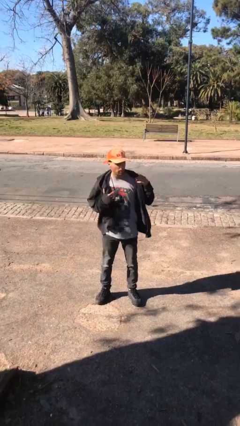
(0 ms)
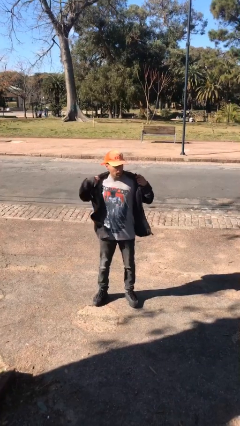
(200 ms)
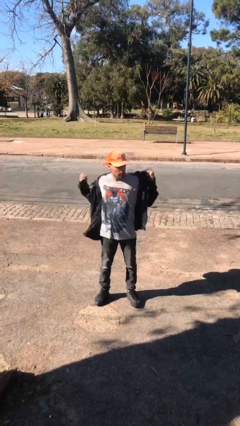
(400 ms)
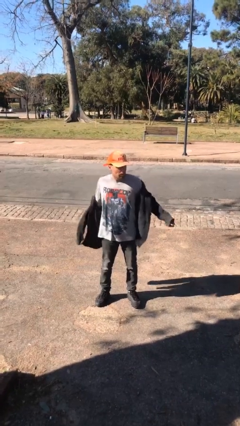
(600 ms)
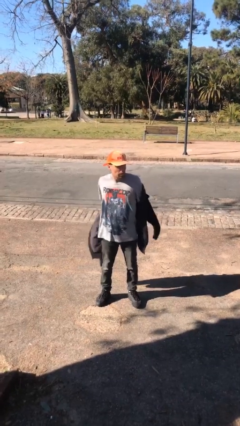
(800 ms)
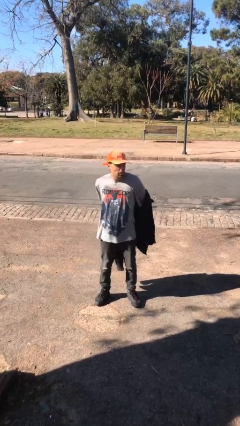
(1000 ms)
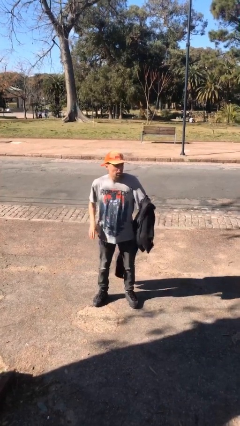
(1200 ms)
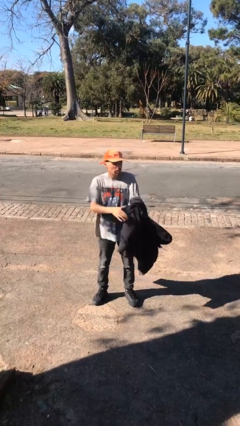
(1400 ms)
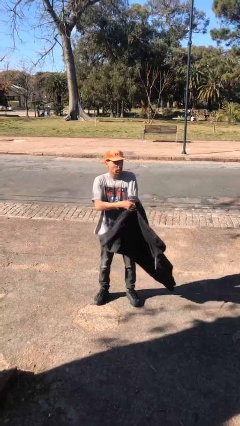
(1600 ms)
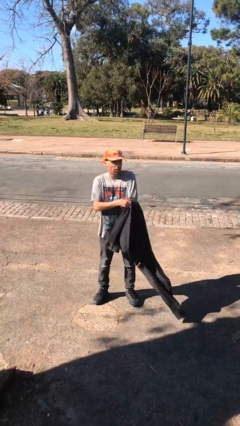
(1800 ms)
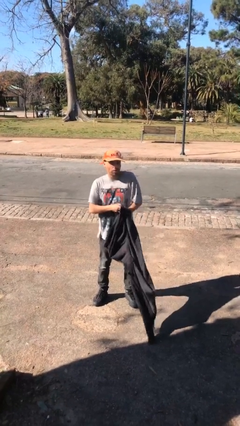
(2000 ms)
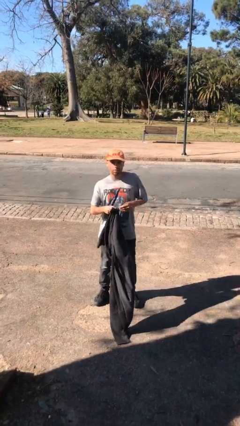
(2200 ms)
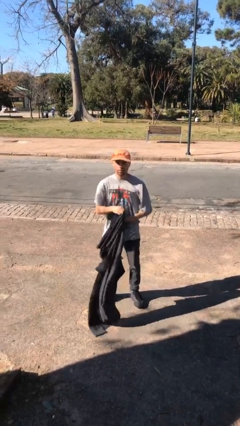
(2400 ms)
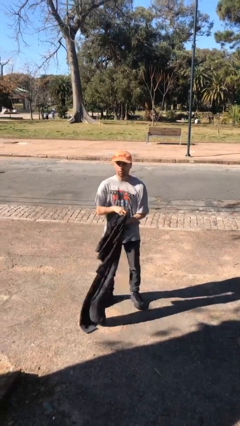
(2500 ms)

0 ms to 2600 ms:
person takes off jacket

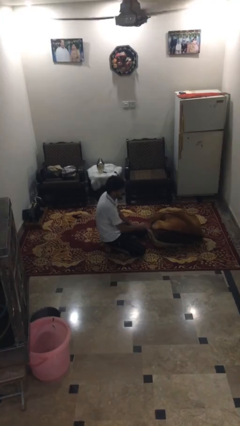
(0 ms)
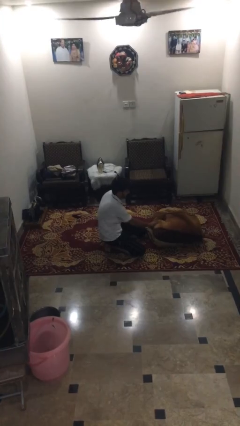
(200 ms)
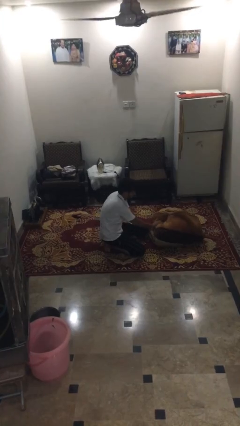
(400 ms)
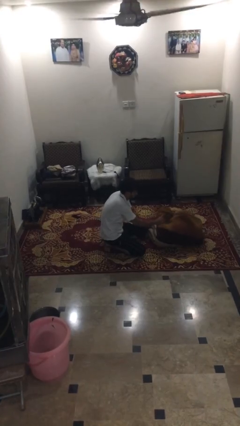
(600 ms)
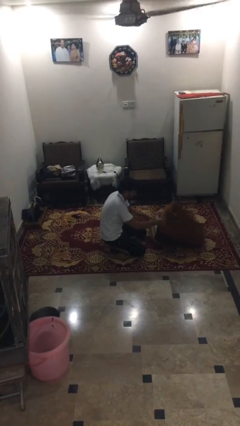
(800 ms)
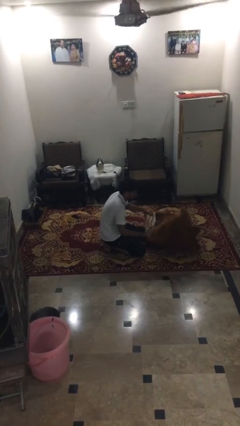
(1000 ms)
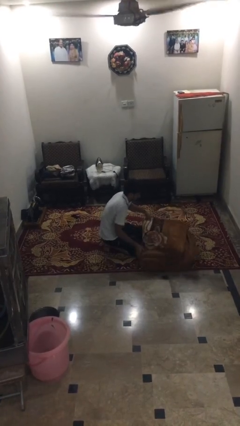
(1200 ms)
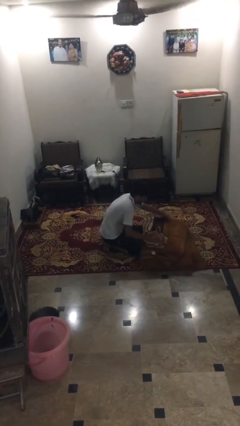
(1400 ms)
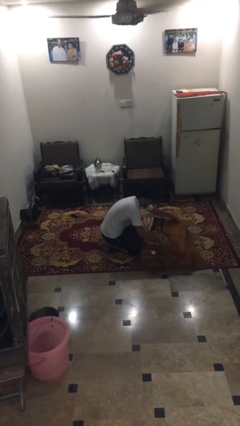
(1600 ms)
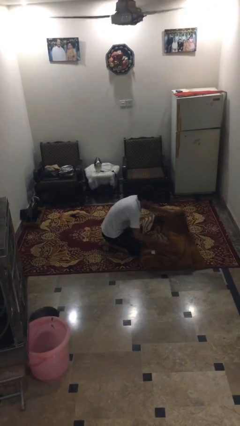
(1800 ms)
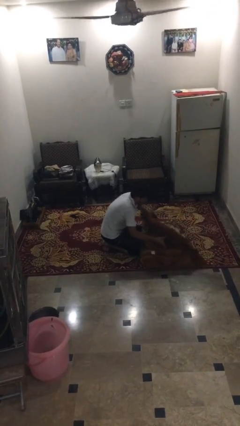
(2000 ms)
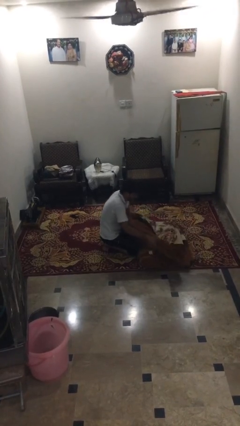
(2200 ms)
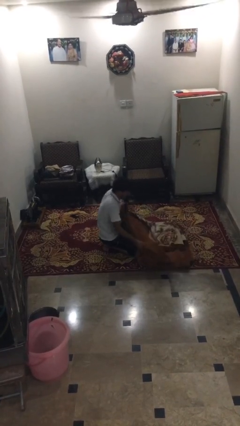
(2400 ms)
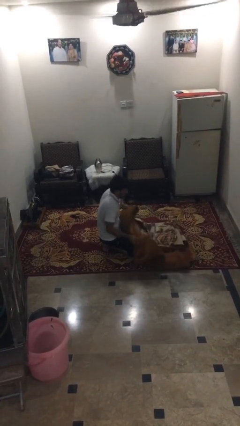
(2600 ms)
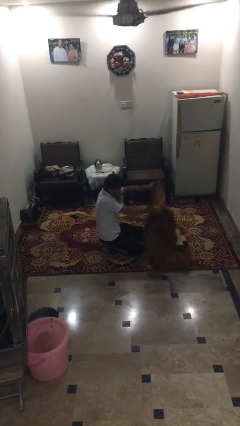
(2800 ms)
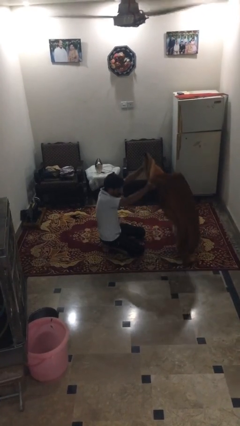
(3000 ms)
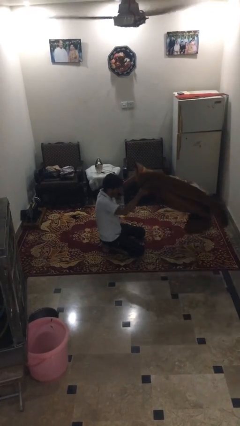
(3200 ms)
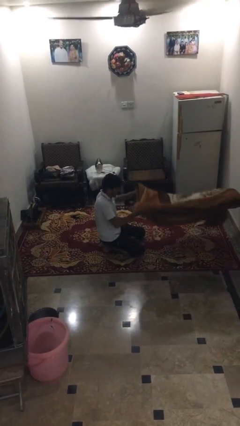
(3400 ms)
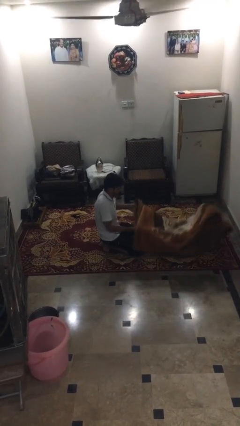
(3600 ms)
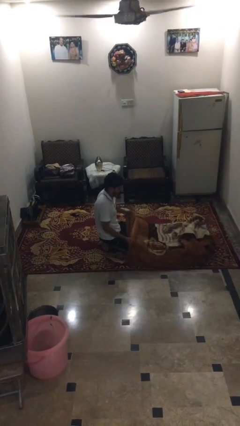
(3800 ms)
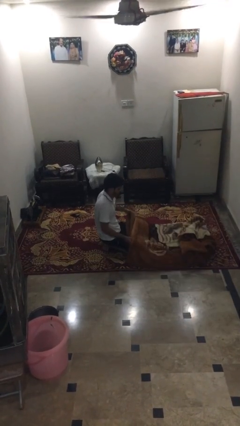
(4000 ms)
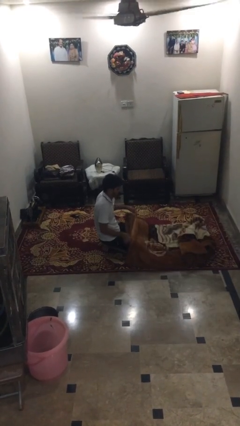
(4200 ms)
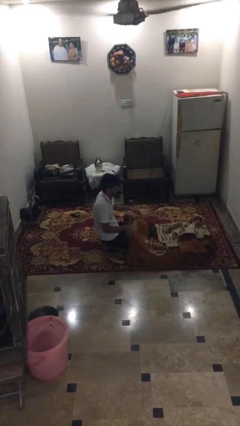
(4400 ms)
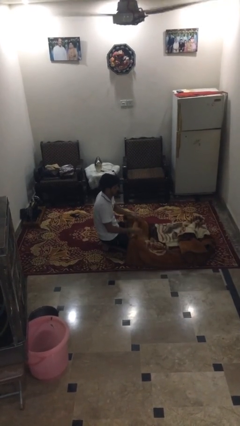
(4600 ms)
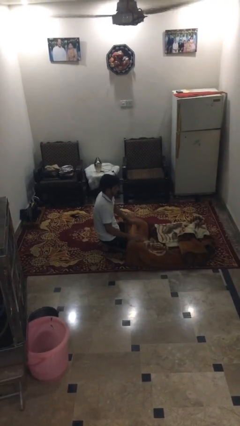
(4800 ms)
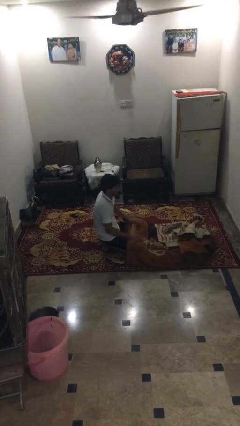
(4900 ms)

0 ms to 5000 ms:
person unfolds blanket

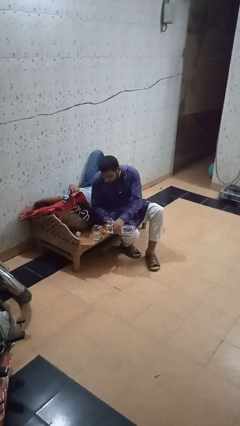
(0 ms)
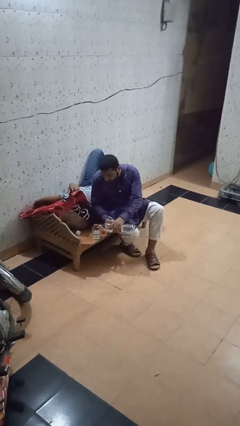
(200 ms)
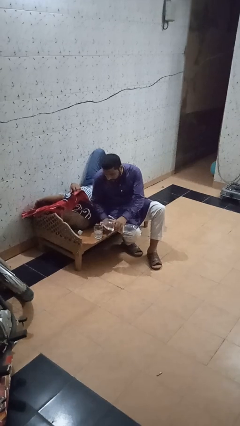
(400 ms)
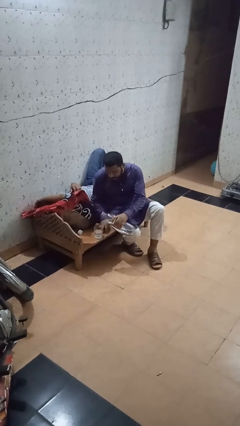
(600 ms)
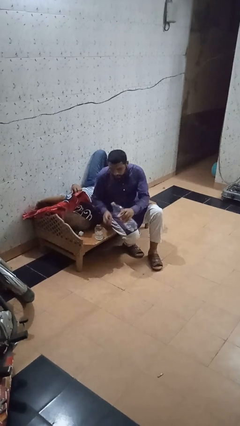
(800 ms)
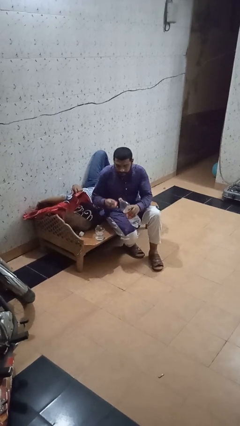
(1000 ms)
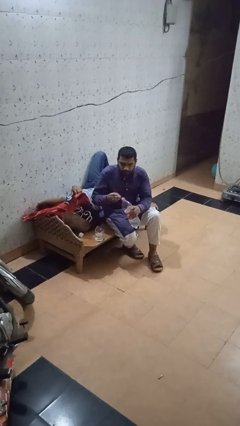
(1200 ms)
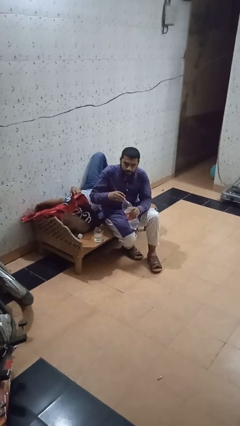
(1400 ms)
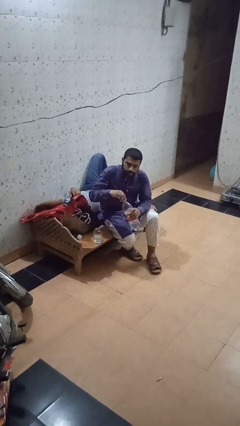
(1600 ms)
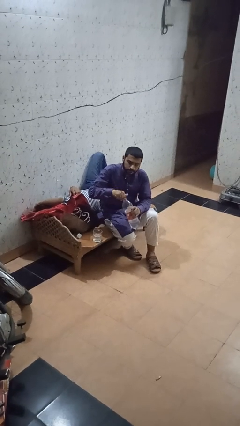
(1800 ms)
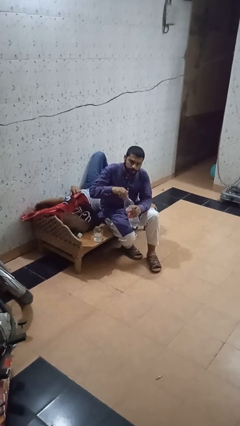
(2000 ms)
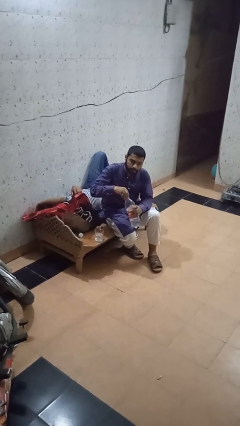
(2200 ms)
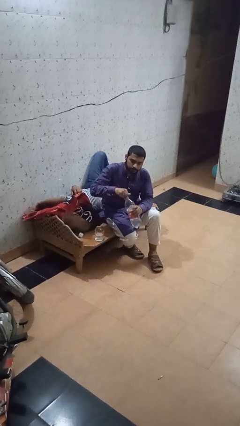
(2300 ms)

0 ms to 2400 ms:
person screws lid to bottle

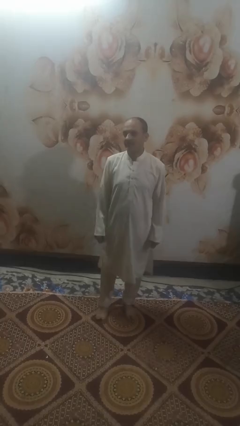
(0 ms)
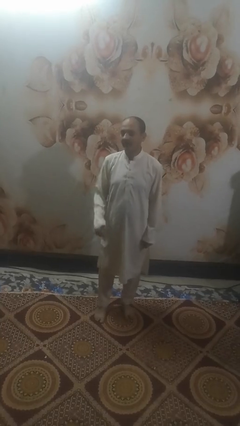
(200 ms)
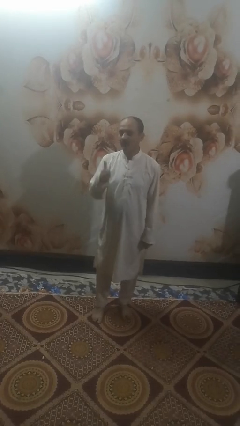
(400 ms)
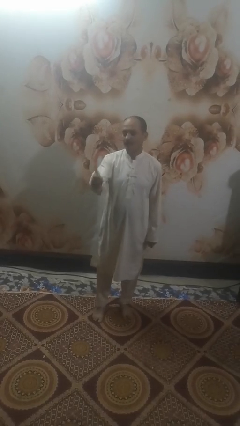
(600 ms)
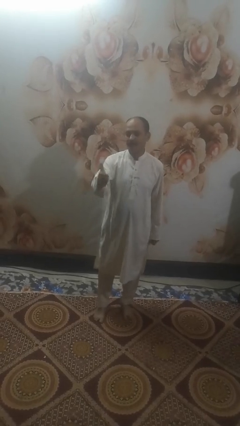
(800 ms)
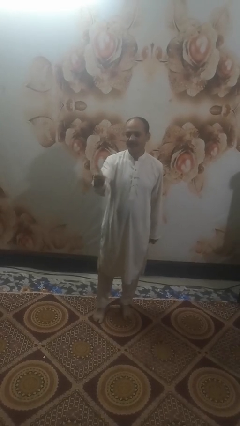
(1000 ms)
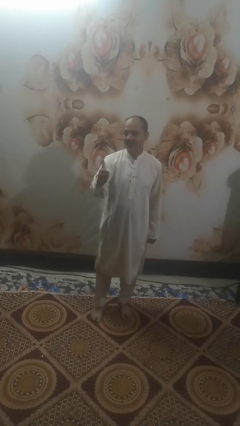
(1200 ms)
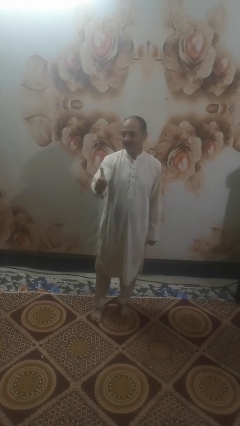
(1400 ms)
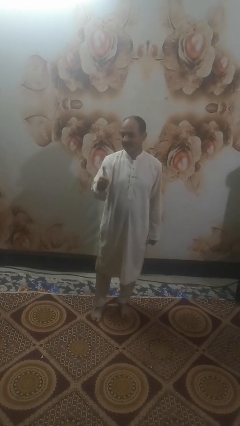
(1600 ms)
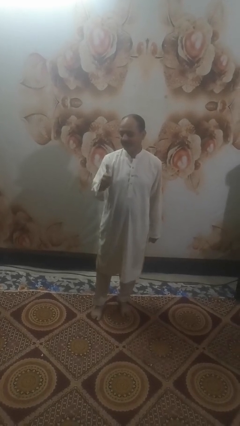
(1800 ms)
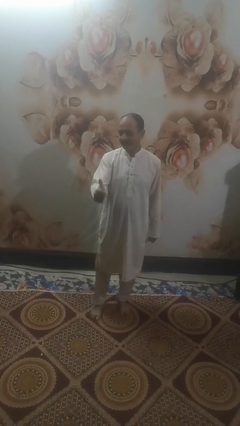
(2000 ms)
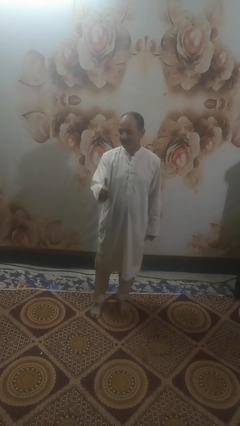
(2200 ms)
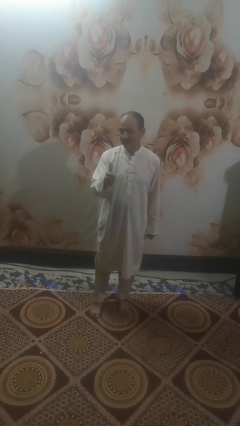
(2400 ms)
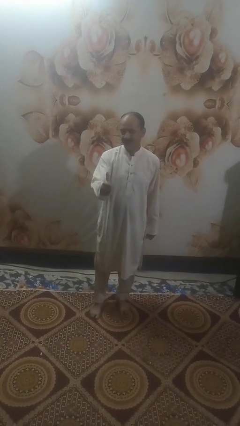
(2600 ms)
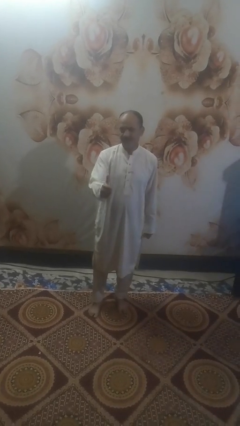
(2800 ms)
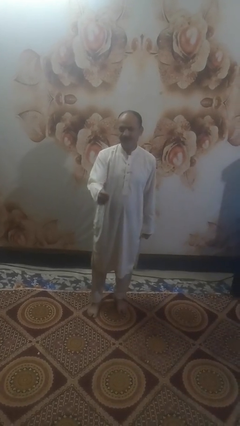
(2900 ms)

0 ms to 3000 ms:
person gestures thumbs up

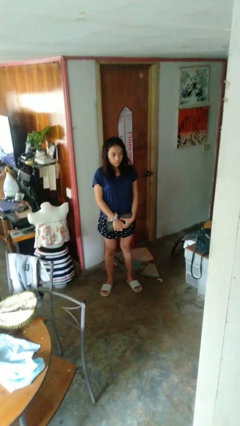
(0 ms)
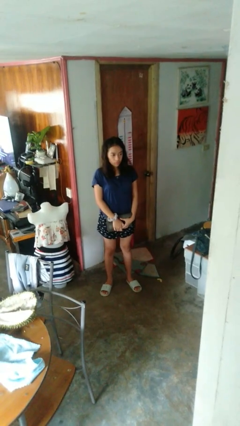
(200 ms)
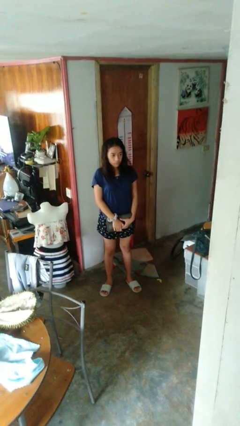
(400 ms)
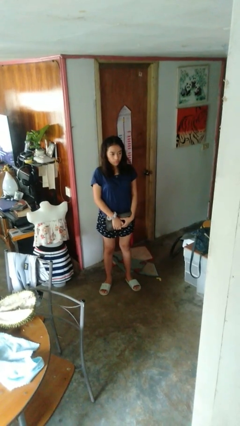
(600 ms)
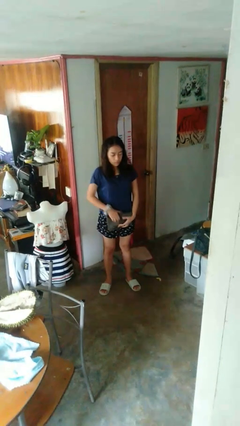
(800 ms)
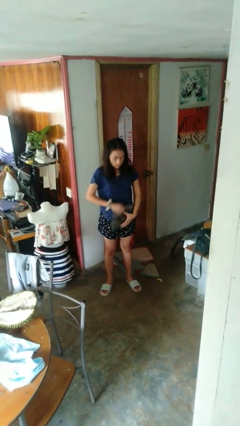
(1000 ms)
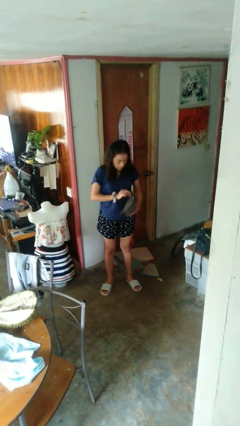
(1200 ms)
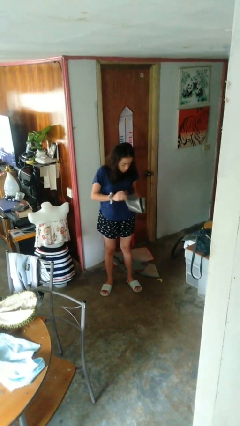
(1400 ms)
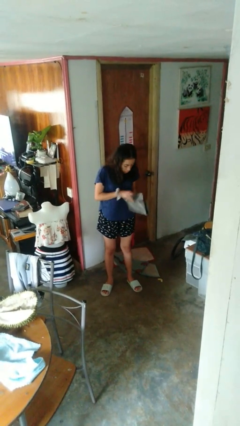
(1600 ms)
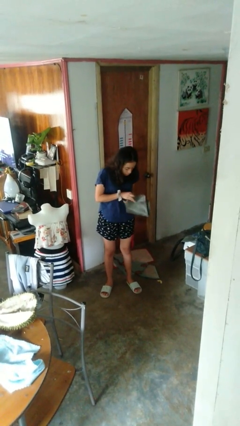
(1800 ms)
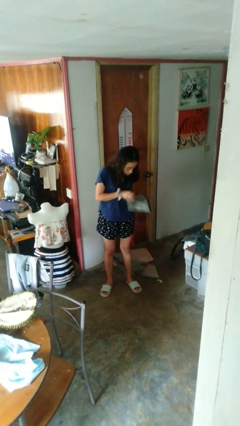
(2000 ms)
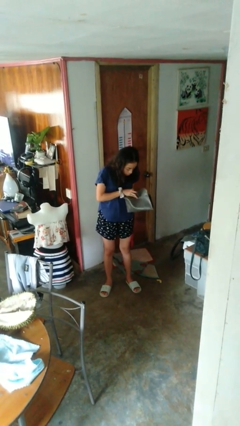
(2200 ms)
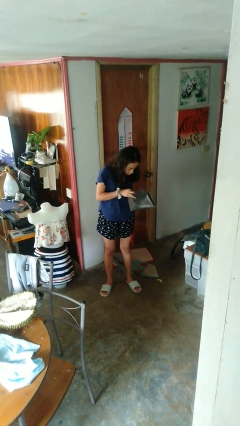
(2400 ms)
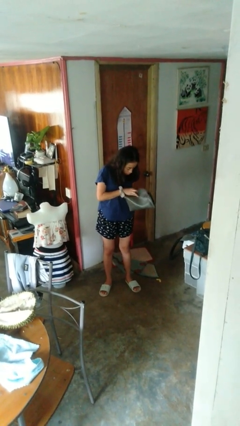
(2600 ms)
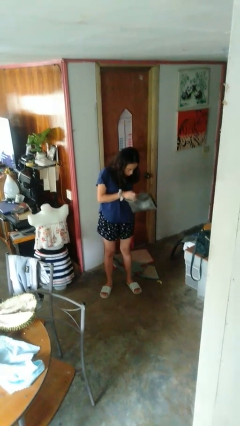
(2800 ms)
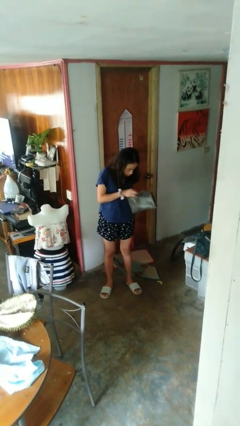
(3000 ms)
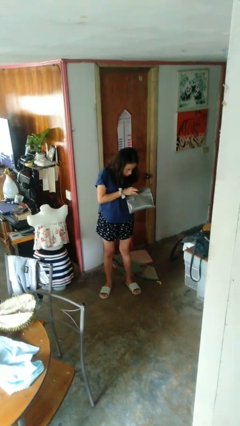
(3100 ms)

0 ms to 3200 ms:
person searches in purse

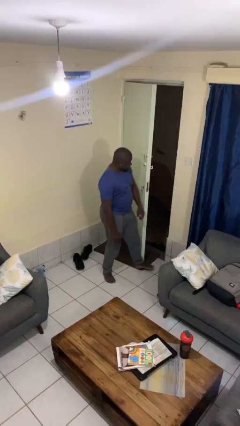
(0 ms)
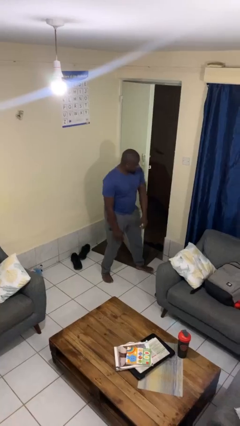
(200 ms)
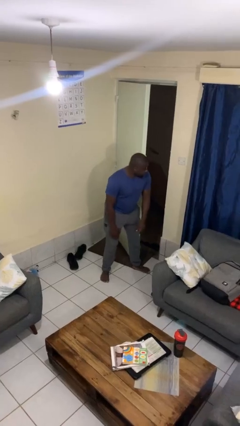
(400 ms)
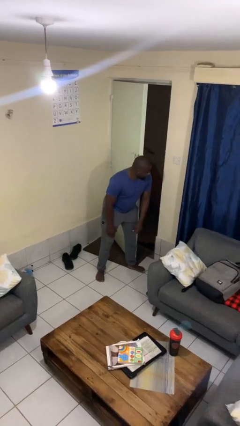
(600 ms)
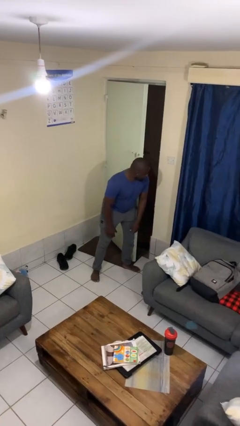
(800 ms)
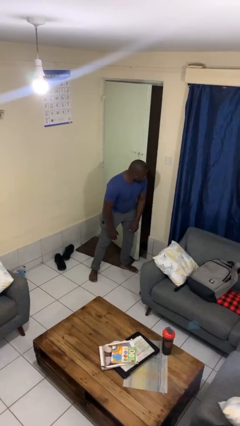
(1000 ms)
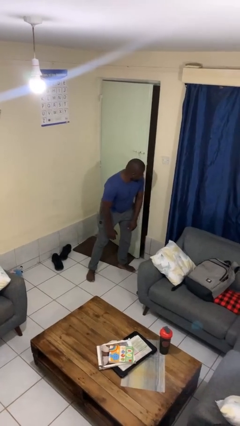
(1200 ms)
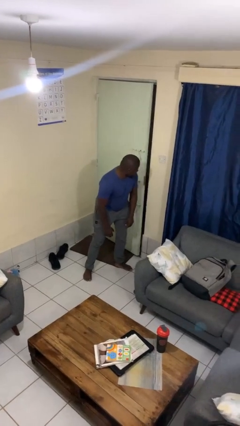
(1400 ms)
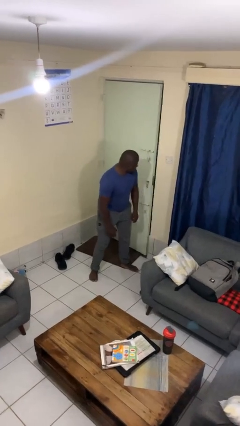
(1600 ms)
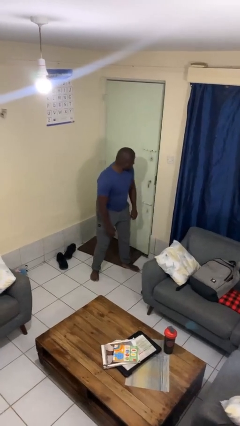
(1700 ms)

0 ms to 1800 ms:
person closes door with hip
